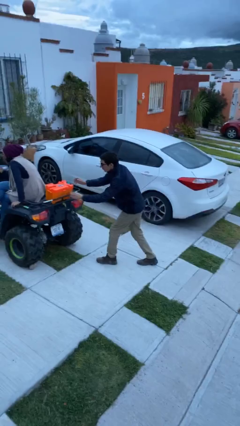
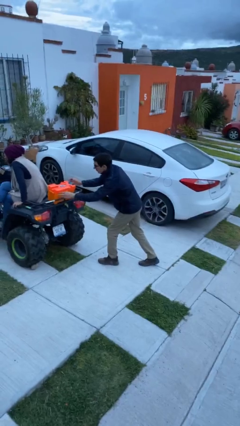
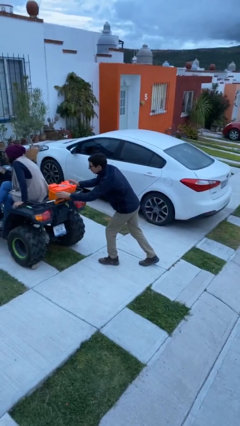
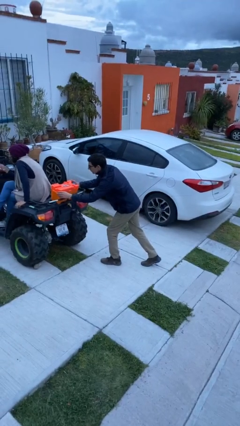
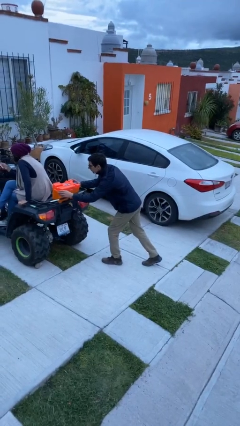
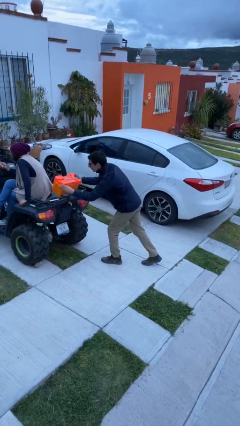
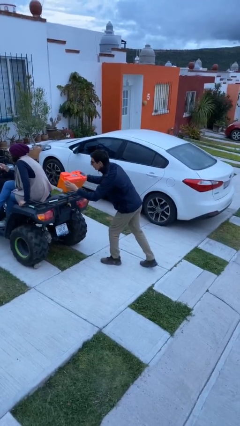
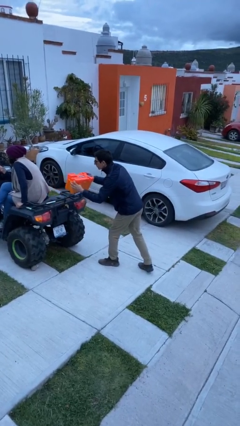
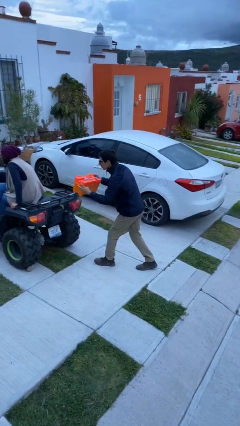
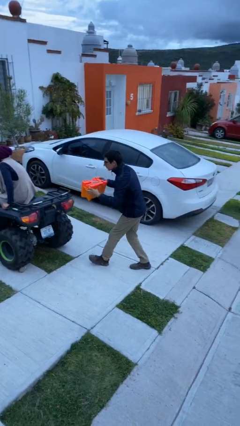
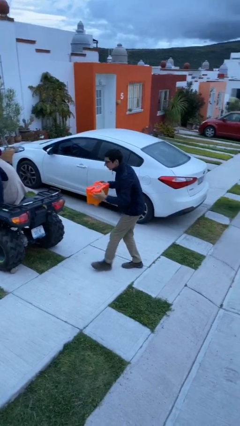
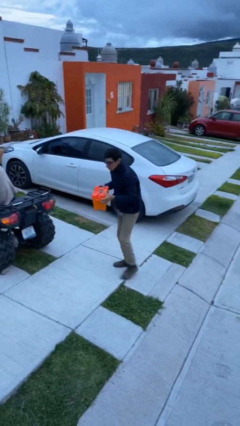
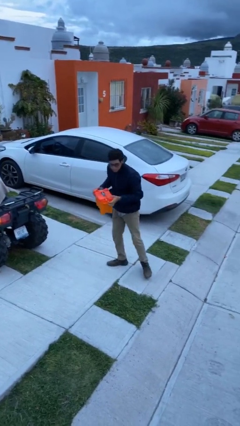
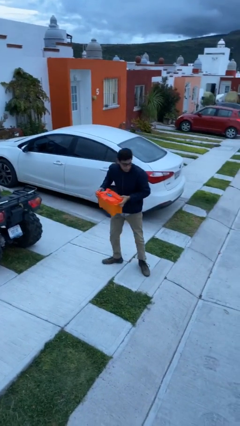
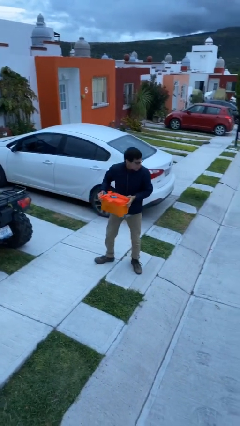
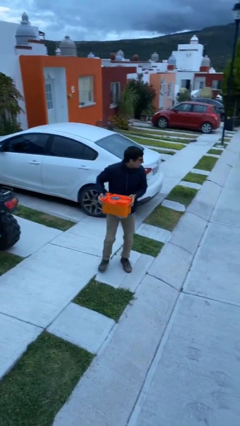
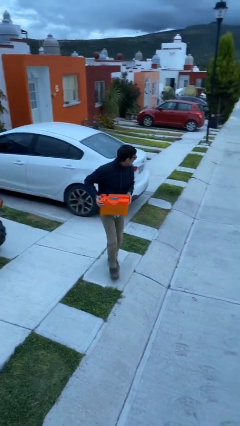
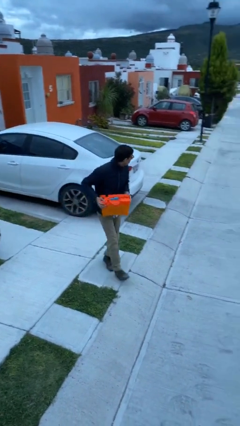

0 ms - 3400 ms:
person steals object from person

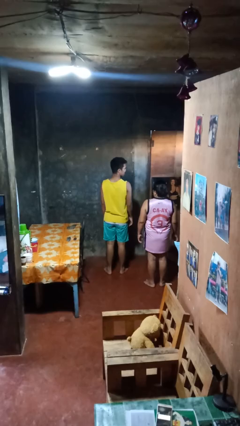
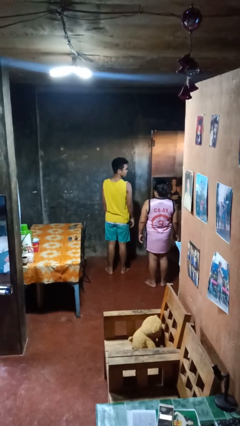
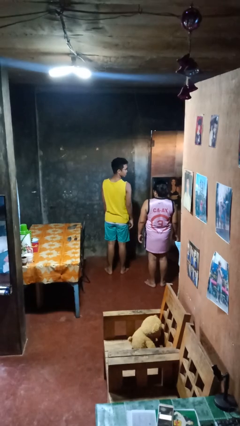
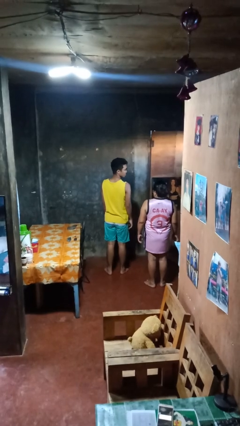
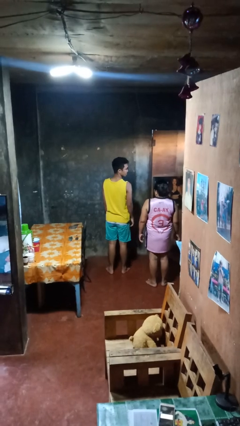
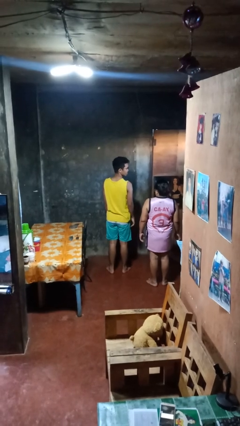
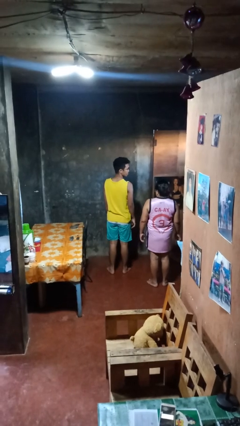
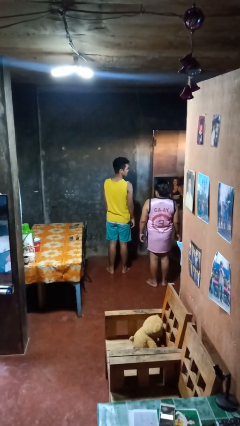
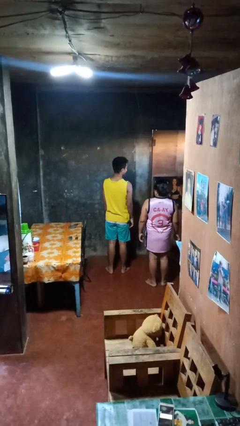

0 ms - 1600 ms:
person looks over shoulder

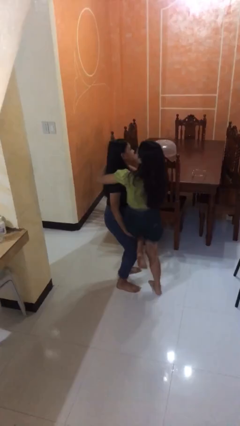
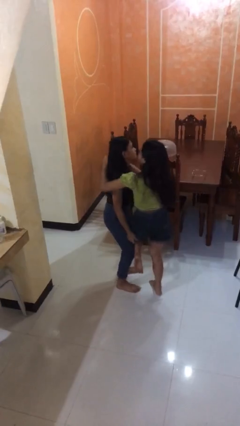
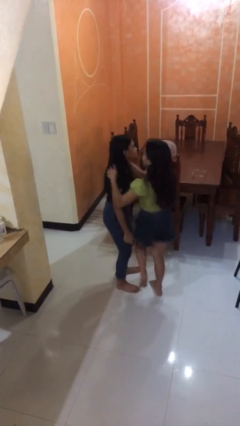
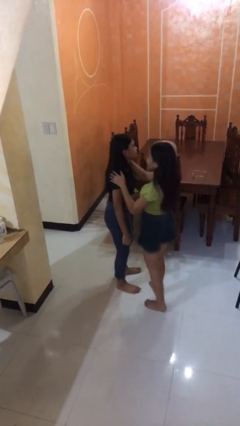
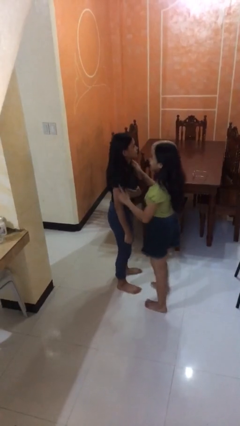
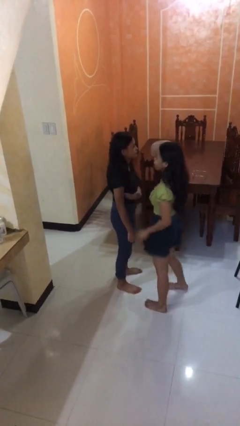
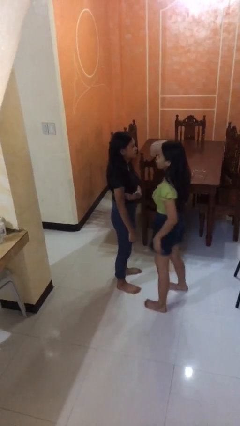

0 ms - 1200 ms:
person puts down person

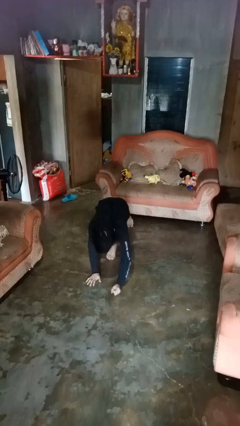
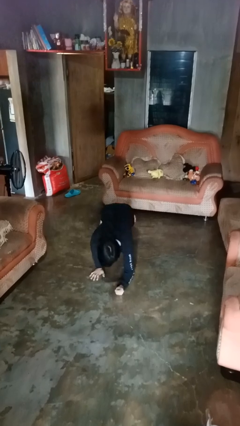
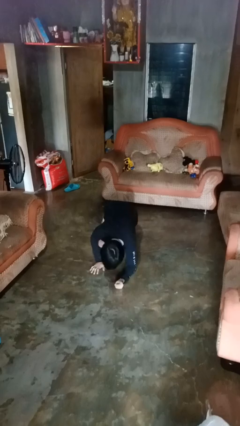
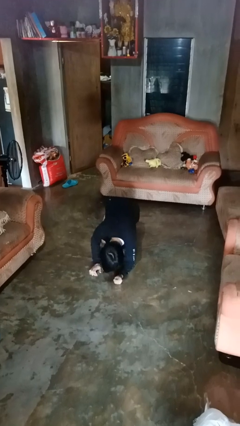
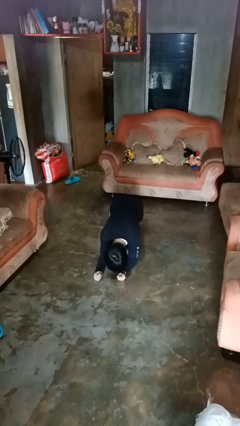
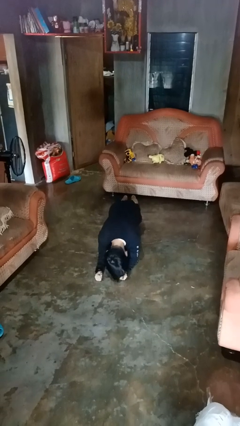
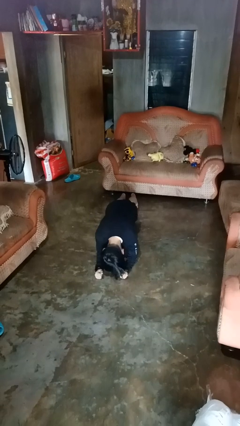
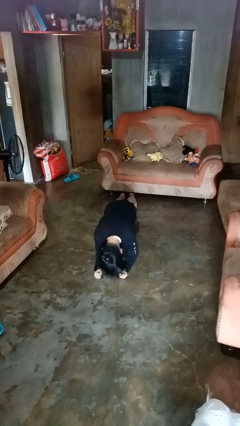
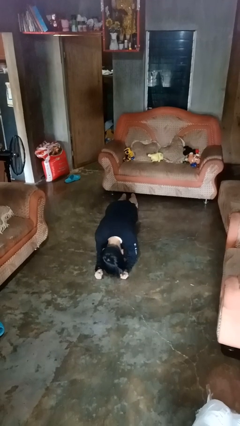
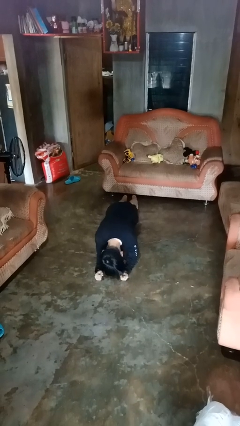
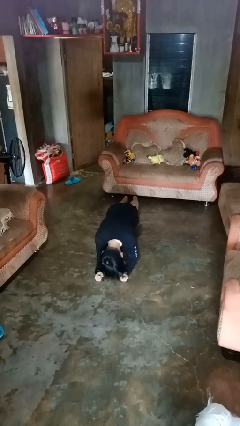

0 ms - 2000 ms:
person exercises with plank

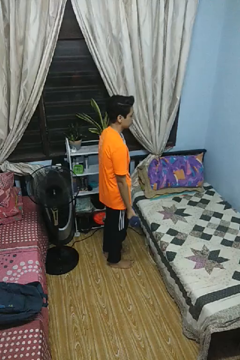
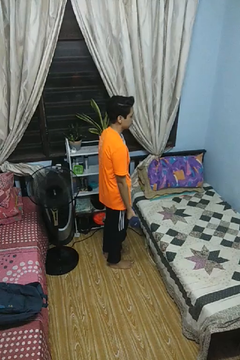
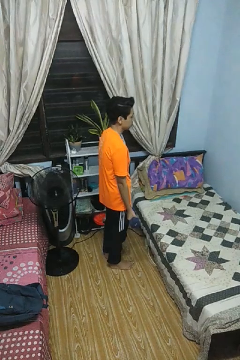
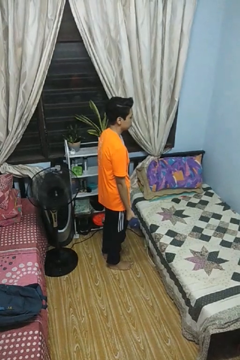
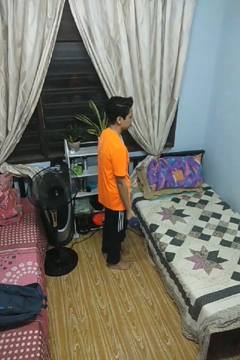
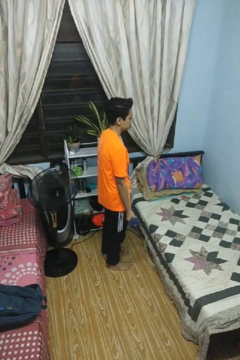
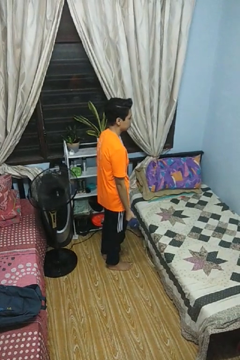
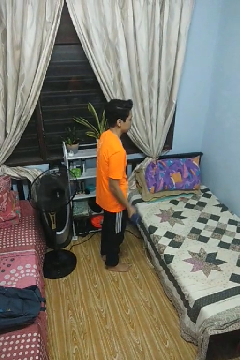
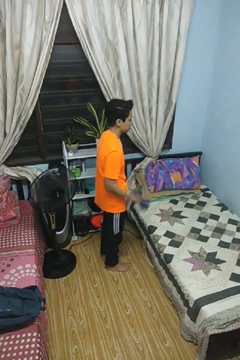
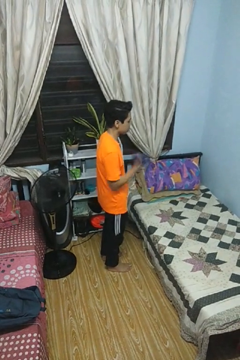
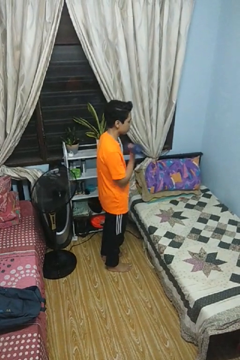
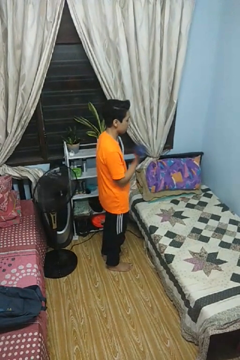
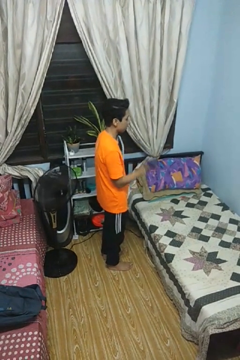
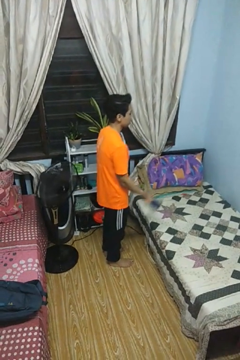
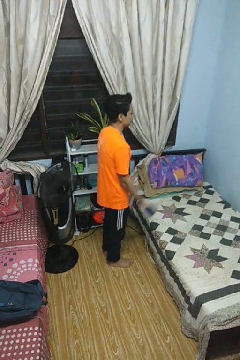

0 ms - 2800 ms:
person lifts dumbbells

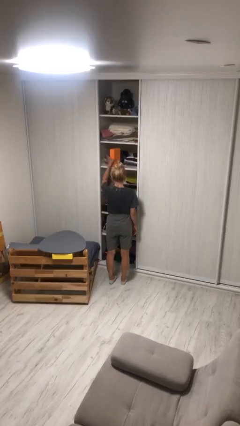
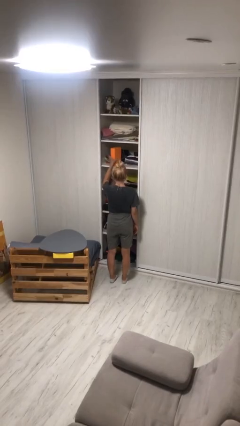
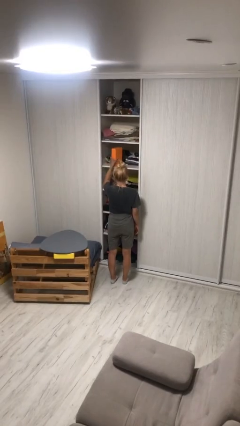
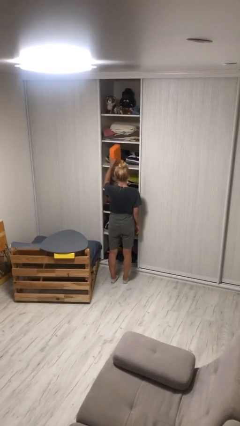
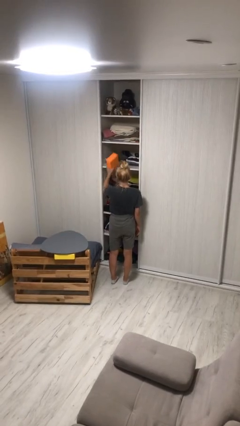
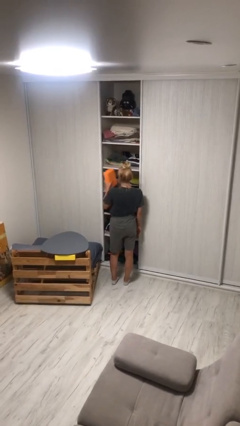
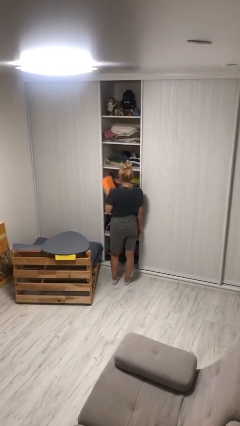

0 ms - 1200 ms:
person picks up object from shelf

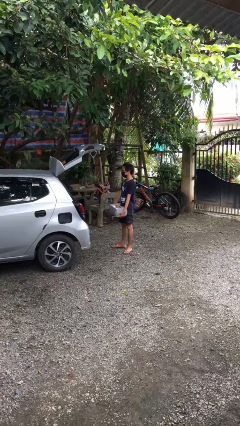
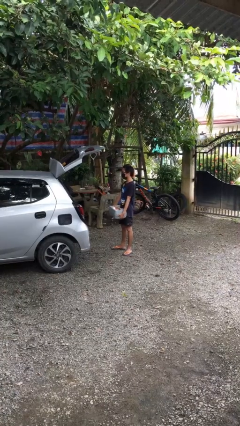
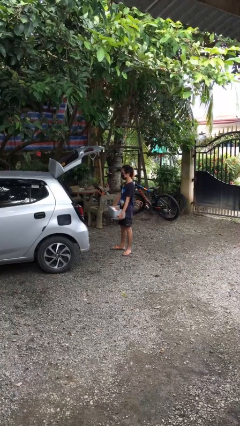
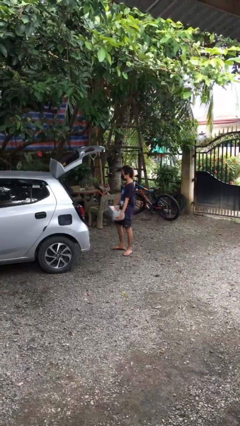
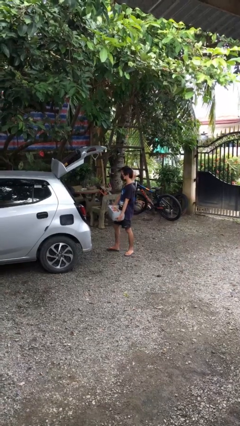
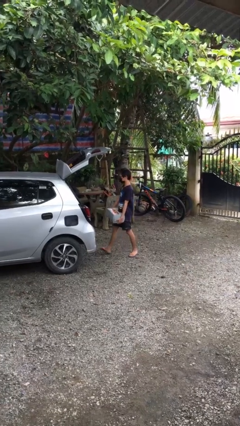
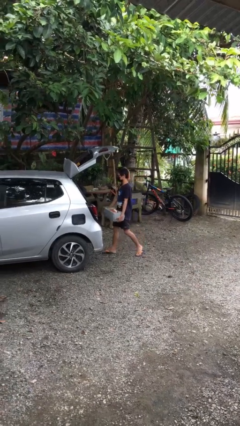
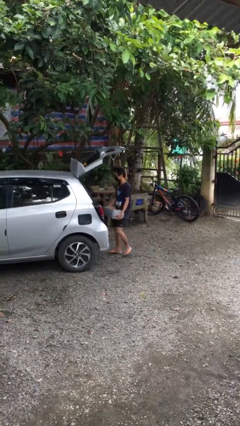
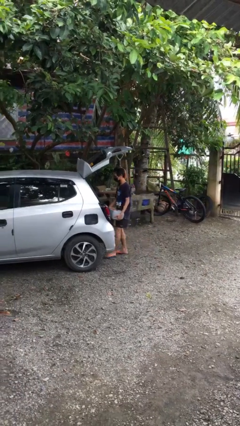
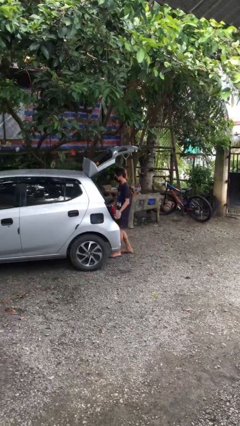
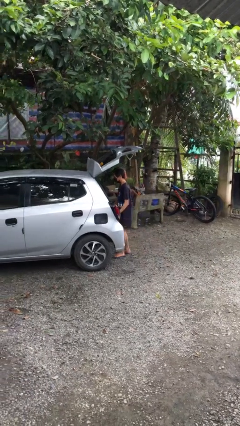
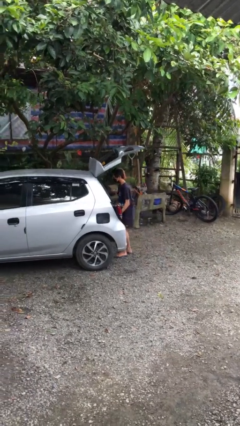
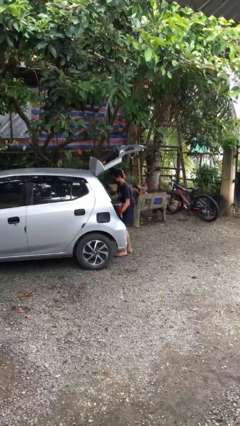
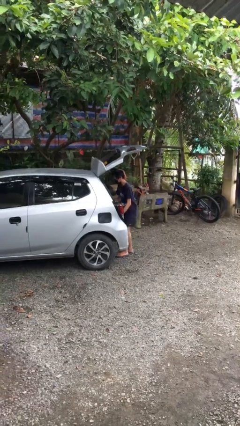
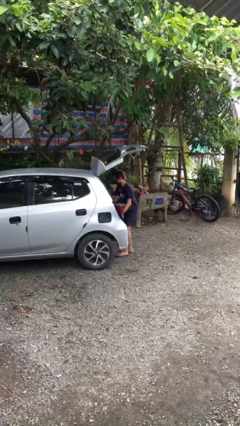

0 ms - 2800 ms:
person loads car

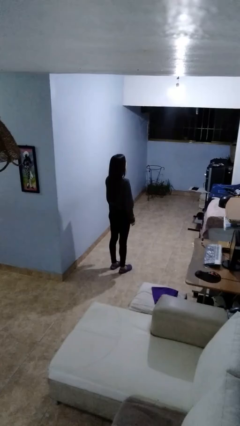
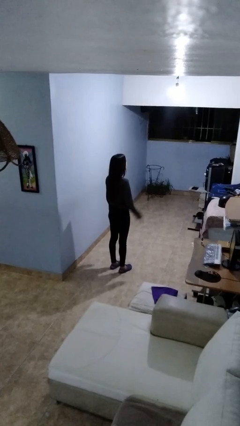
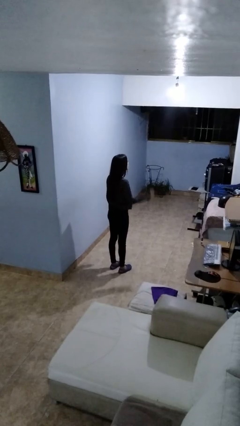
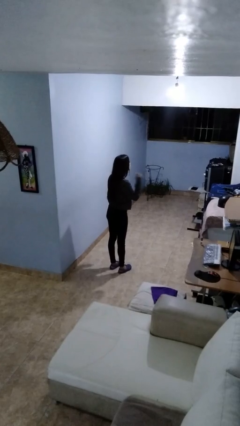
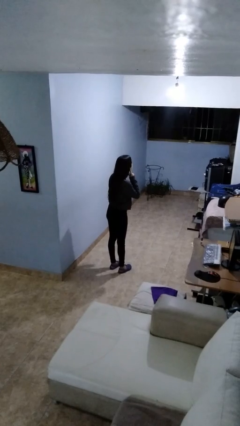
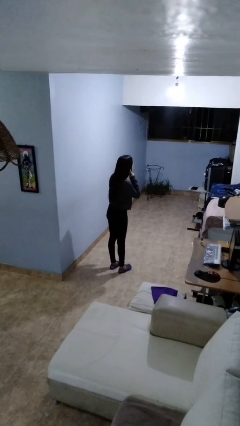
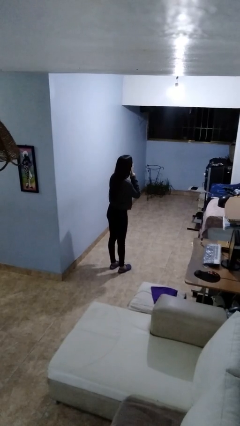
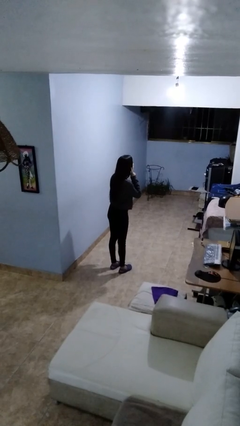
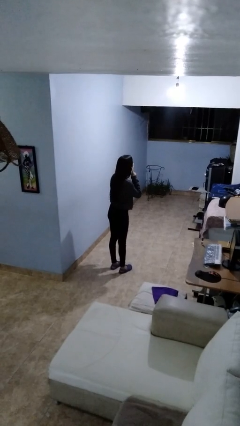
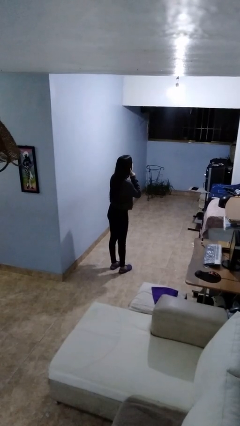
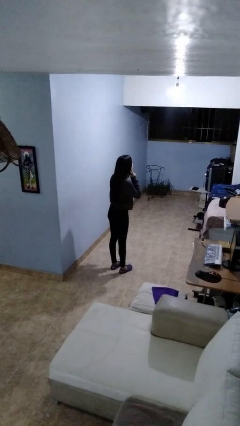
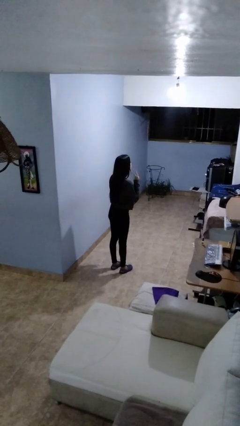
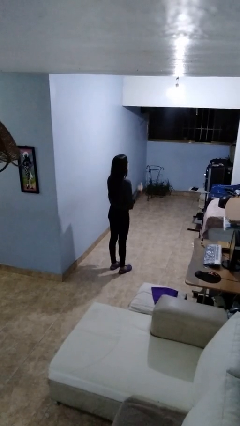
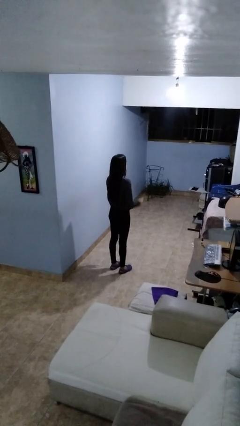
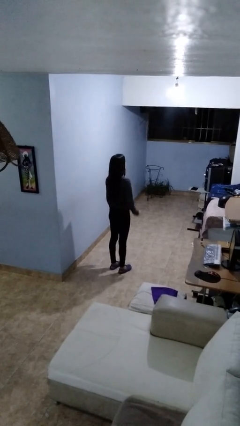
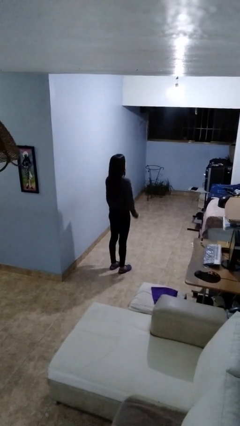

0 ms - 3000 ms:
person gestures listen closely
